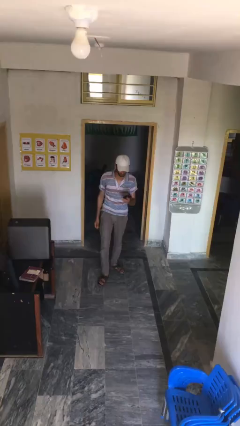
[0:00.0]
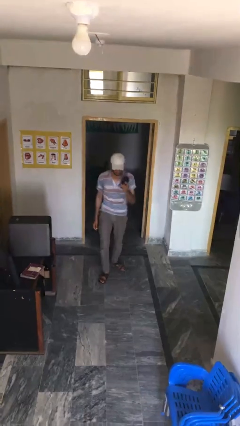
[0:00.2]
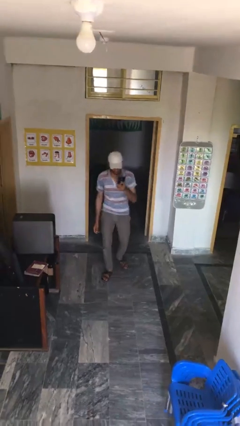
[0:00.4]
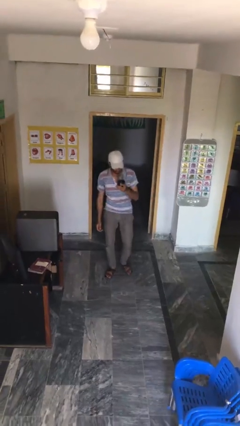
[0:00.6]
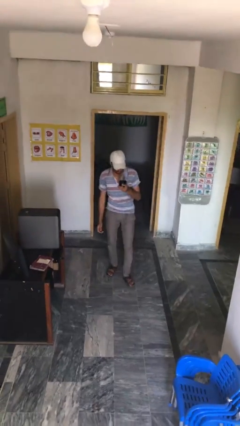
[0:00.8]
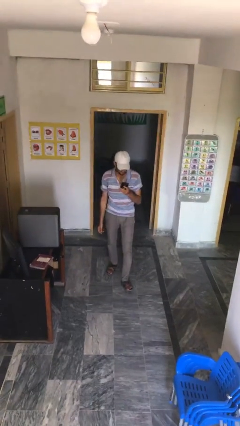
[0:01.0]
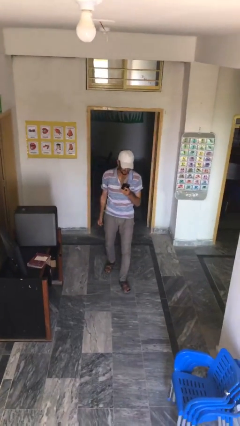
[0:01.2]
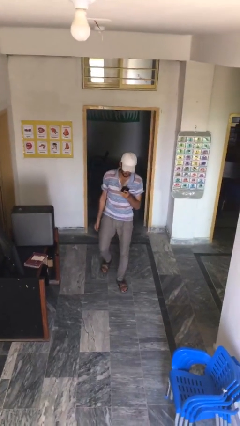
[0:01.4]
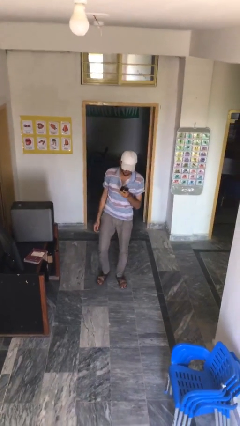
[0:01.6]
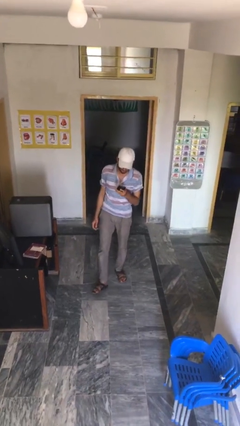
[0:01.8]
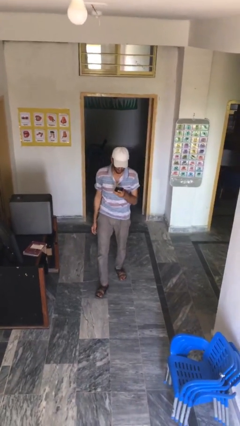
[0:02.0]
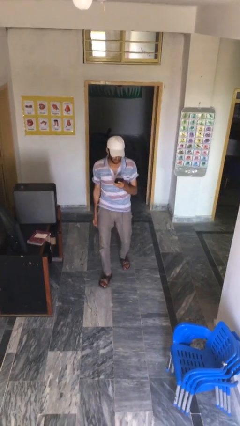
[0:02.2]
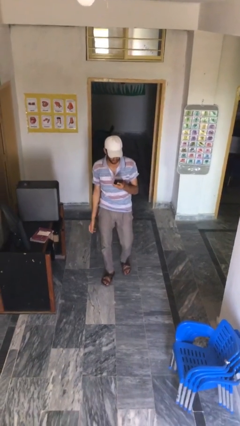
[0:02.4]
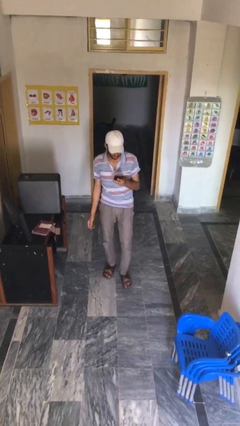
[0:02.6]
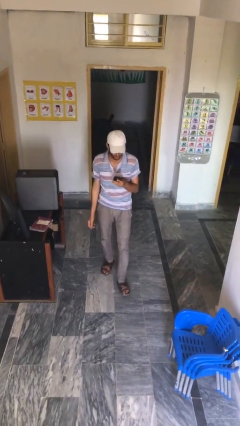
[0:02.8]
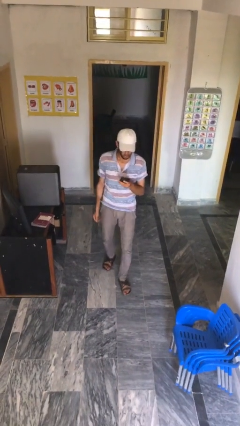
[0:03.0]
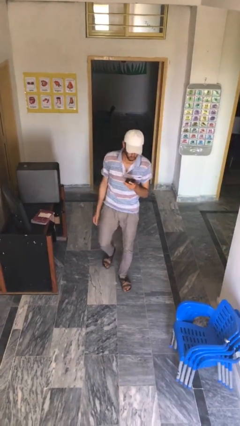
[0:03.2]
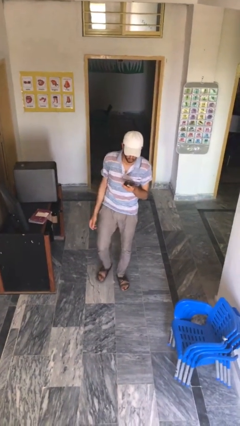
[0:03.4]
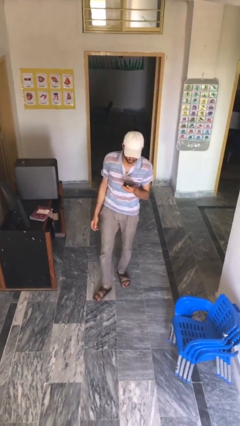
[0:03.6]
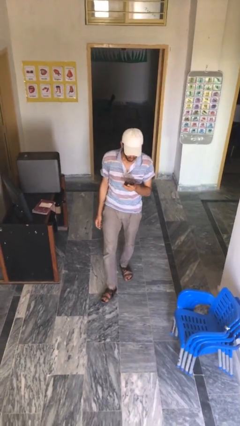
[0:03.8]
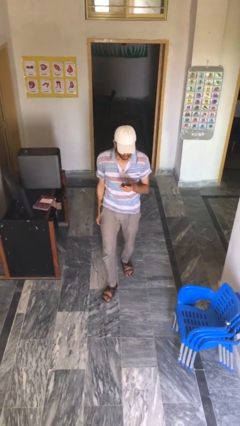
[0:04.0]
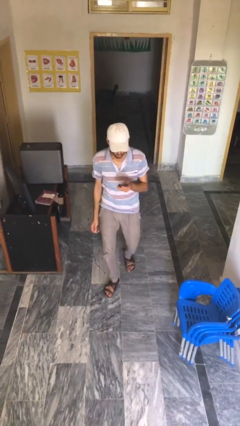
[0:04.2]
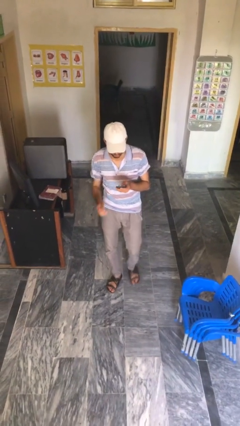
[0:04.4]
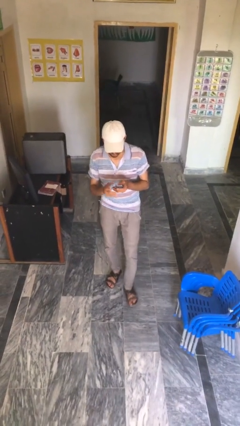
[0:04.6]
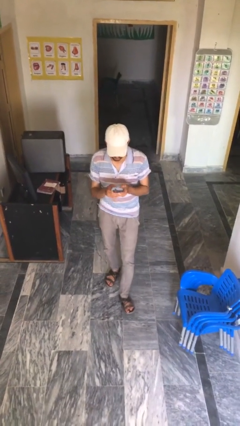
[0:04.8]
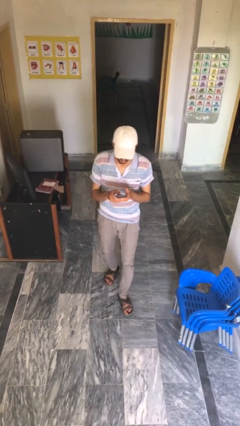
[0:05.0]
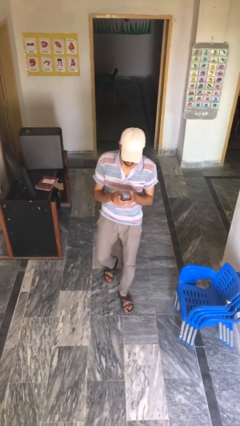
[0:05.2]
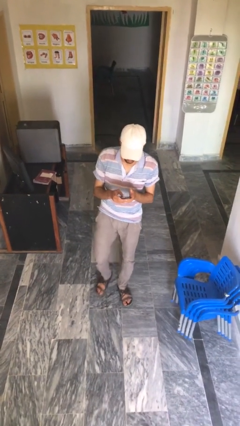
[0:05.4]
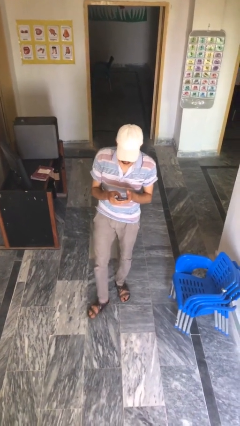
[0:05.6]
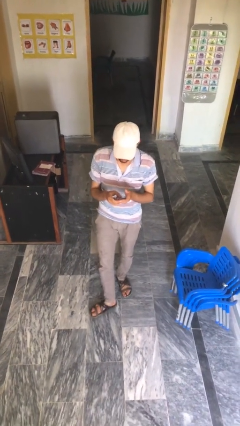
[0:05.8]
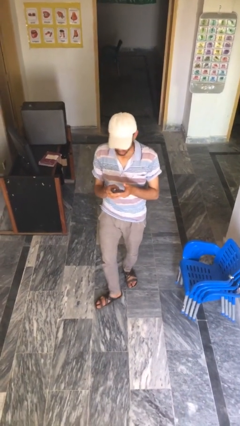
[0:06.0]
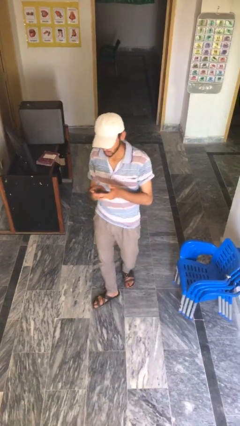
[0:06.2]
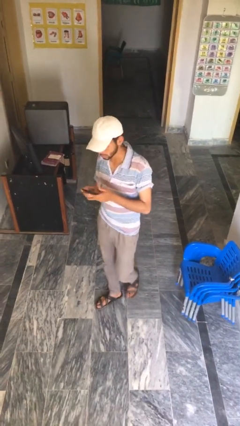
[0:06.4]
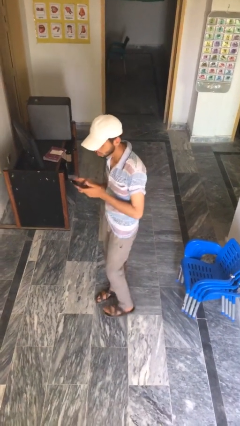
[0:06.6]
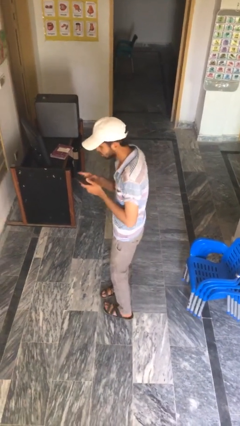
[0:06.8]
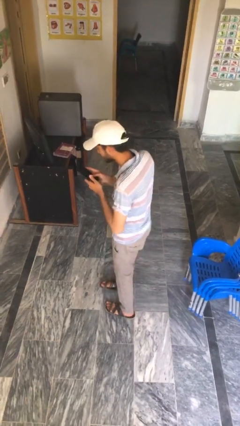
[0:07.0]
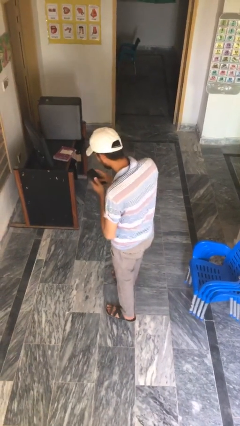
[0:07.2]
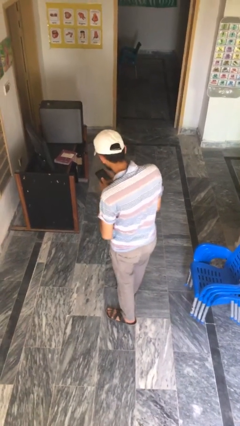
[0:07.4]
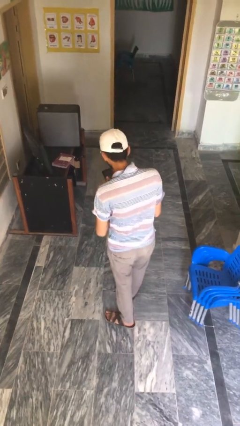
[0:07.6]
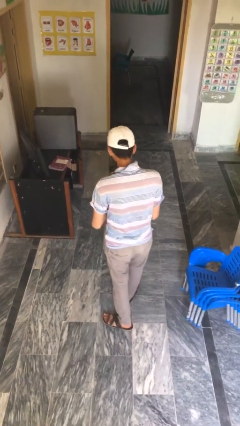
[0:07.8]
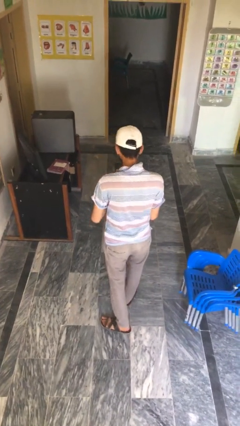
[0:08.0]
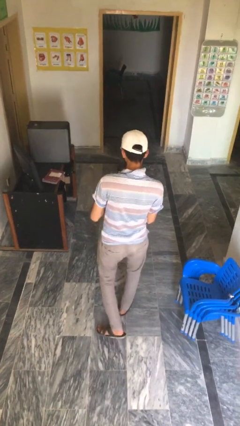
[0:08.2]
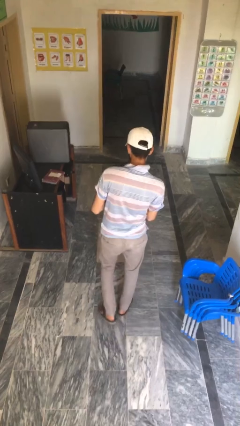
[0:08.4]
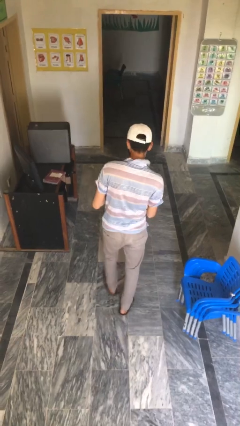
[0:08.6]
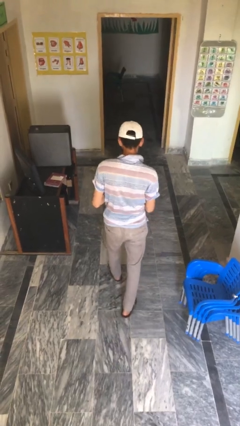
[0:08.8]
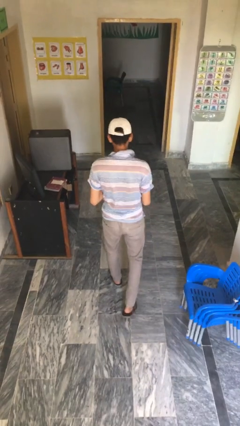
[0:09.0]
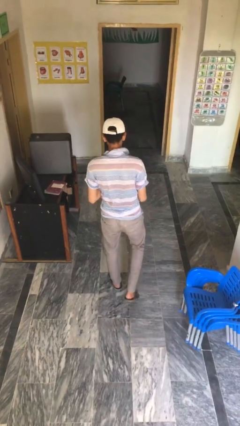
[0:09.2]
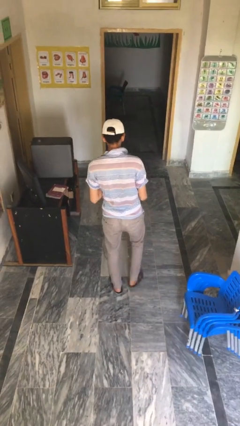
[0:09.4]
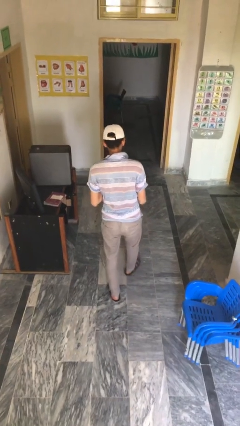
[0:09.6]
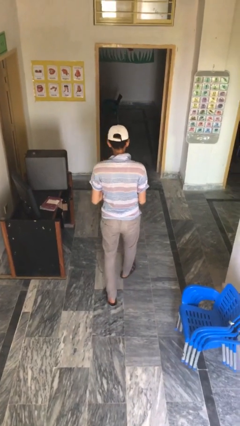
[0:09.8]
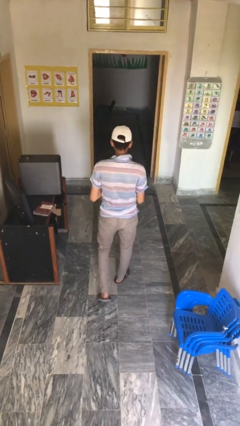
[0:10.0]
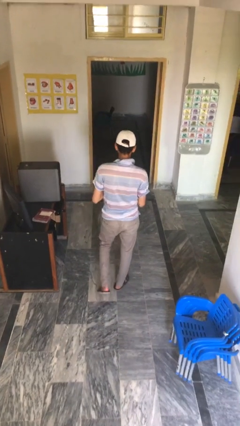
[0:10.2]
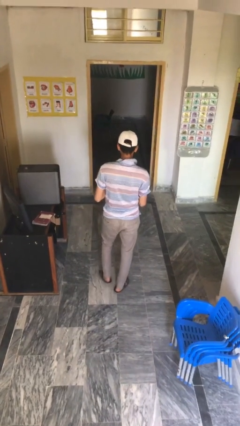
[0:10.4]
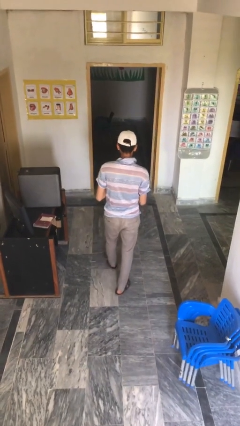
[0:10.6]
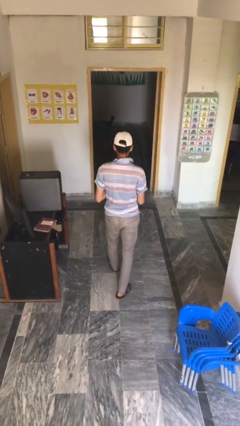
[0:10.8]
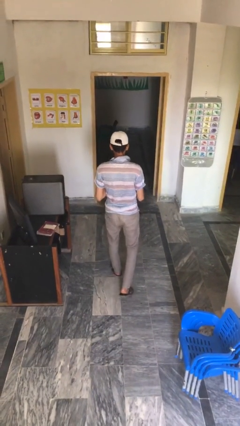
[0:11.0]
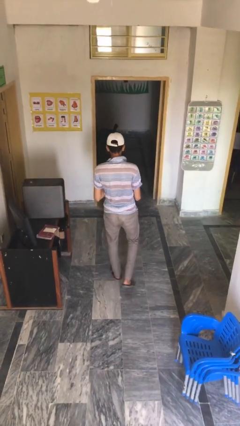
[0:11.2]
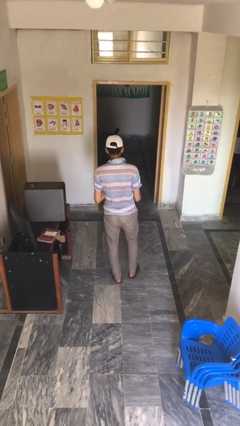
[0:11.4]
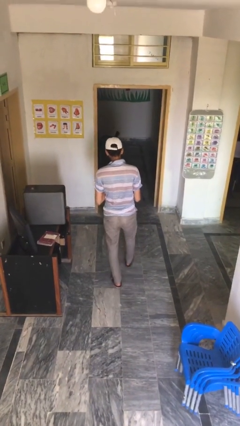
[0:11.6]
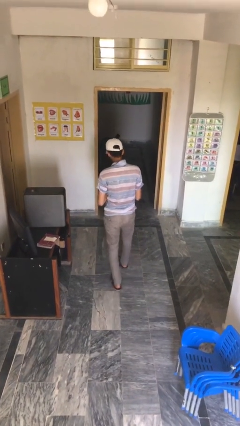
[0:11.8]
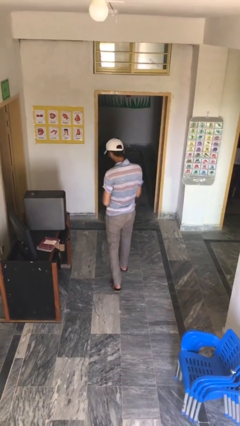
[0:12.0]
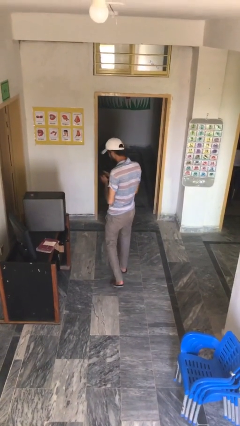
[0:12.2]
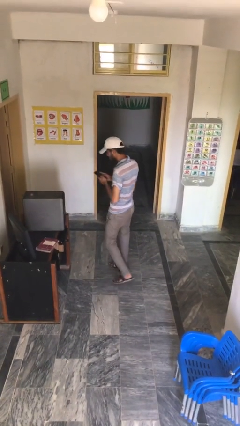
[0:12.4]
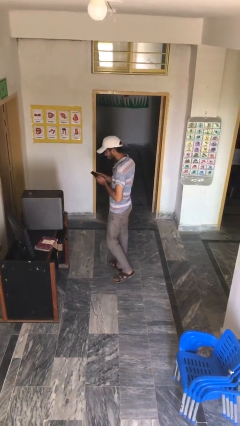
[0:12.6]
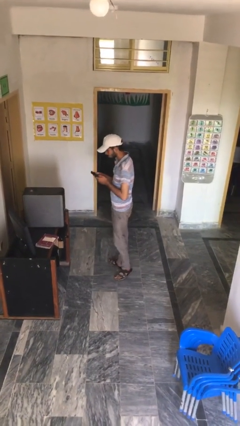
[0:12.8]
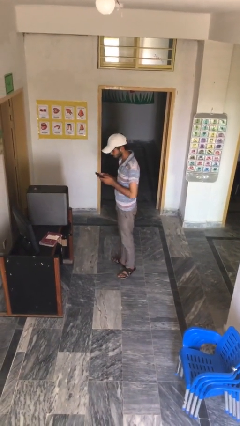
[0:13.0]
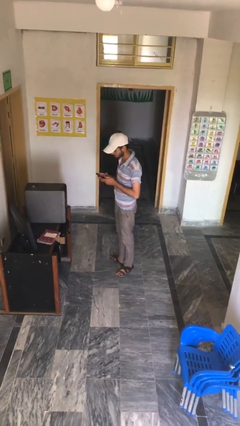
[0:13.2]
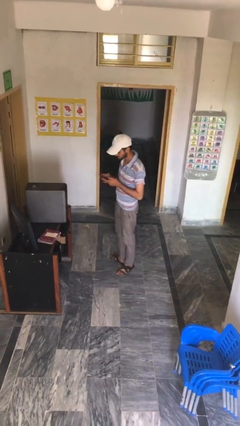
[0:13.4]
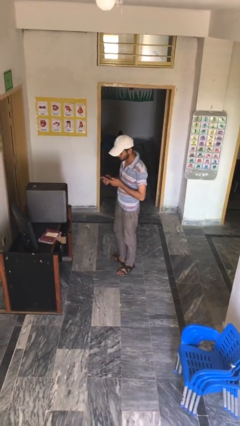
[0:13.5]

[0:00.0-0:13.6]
person texts on phone

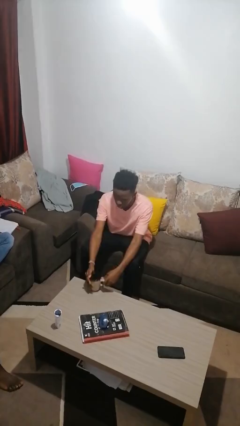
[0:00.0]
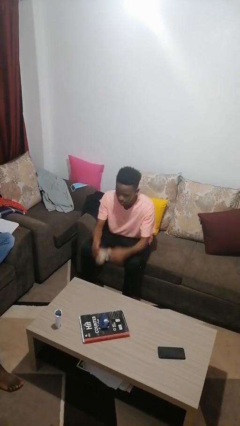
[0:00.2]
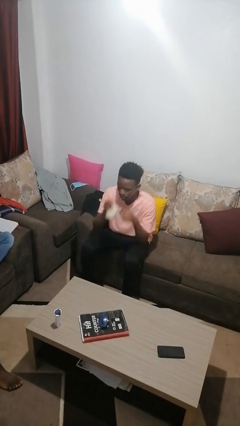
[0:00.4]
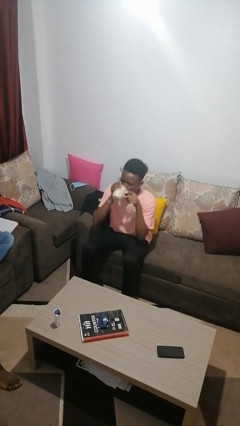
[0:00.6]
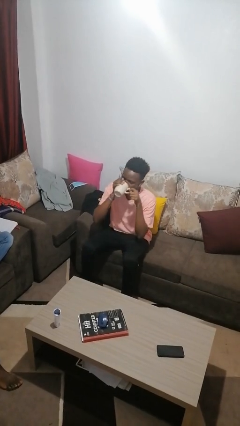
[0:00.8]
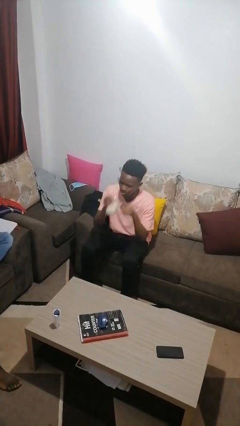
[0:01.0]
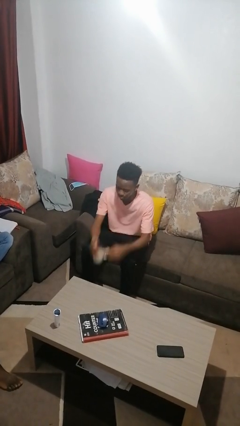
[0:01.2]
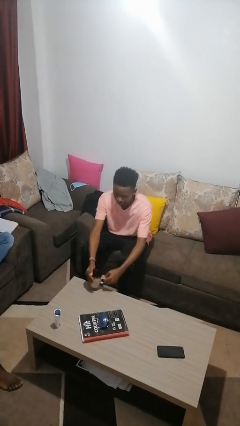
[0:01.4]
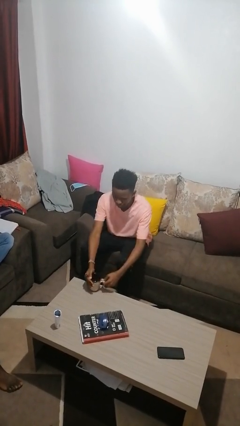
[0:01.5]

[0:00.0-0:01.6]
person drinks from mug

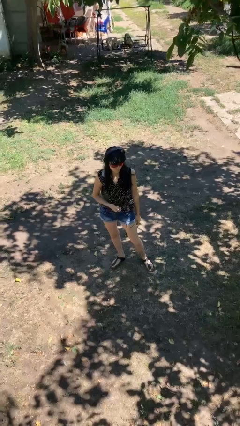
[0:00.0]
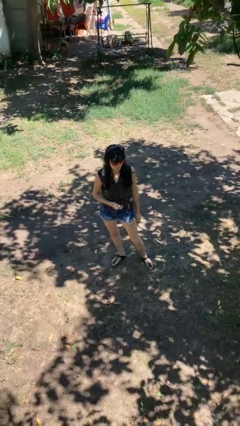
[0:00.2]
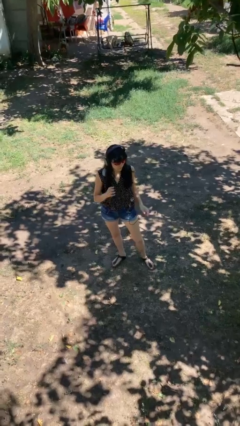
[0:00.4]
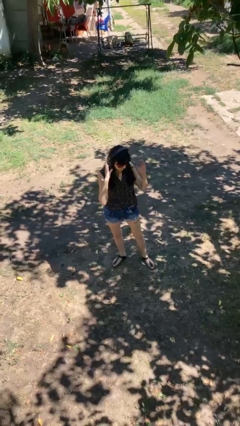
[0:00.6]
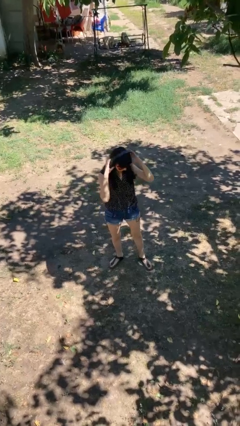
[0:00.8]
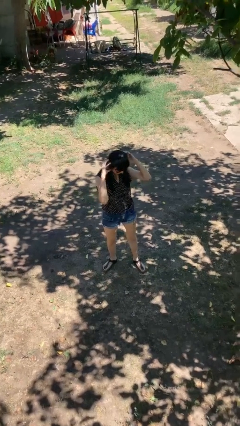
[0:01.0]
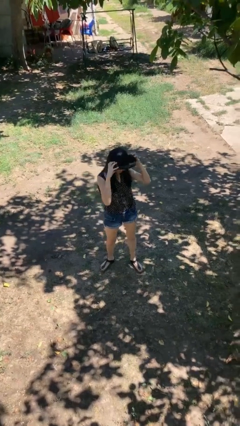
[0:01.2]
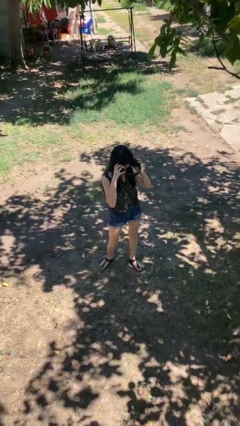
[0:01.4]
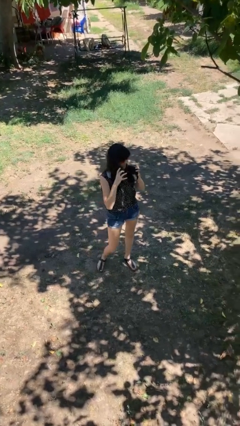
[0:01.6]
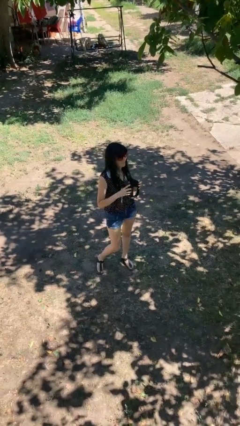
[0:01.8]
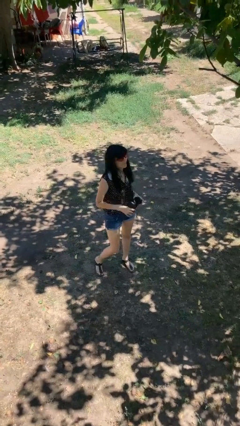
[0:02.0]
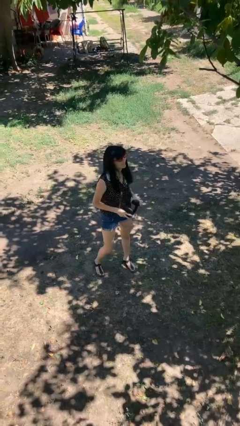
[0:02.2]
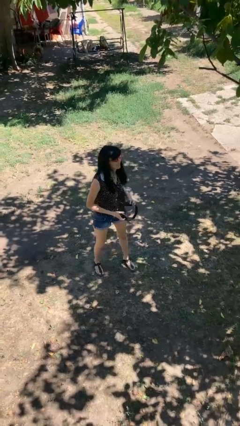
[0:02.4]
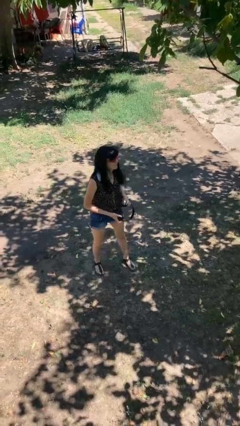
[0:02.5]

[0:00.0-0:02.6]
person takes off headphones

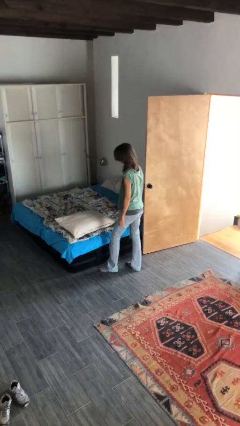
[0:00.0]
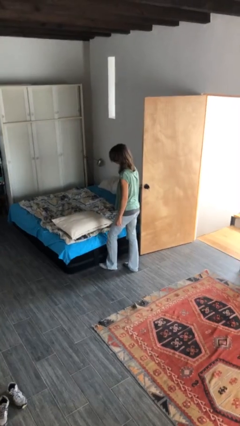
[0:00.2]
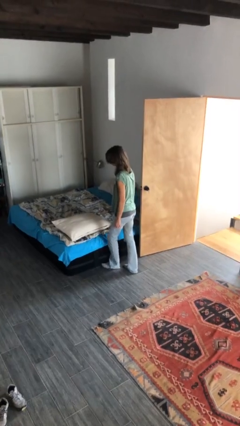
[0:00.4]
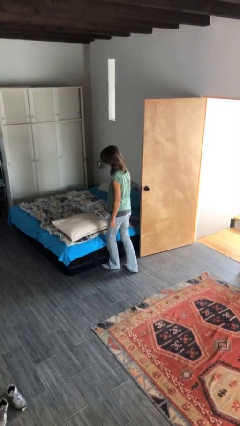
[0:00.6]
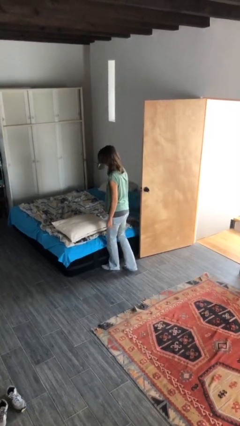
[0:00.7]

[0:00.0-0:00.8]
person puts down object on bed
